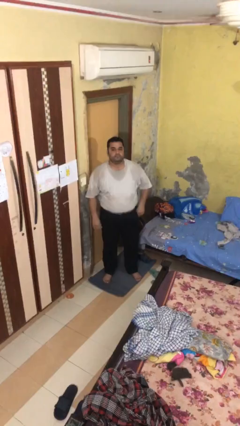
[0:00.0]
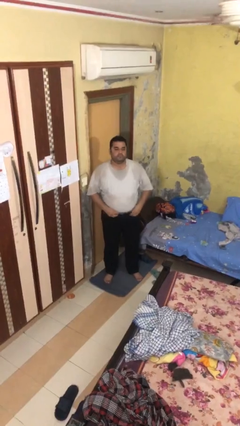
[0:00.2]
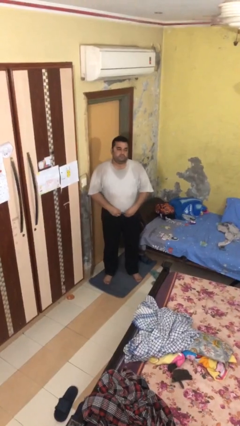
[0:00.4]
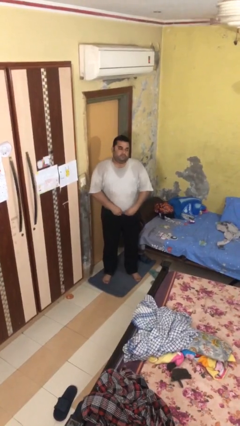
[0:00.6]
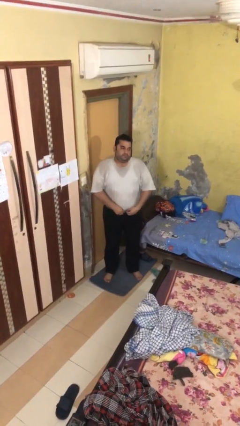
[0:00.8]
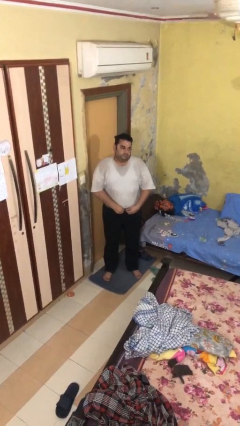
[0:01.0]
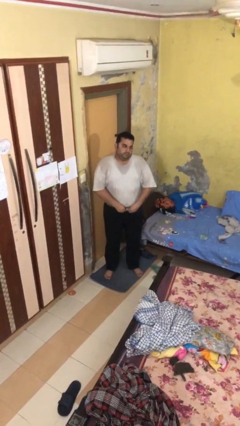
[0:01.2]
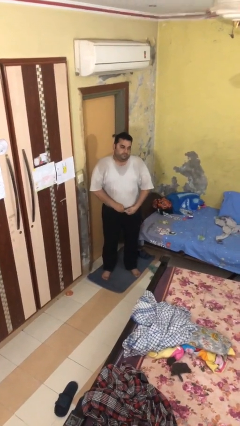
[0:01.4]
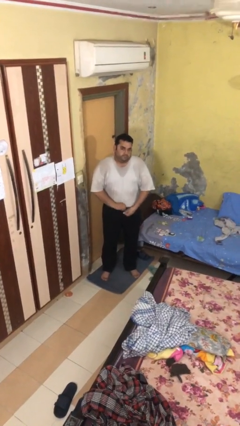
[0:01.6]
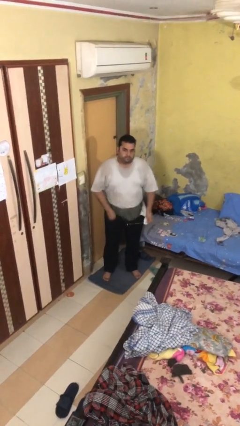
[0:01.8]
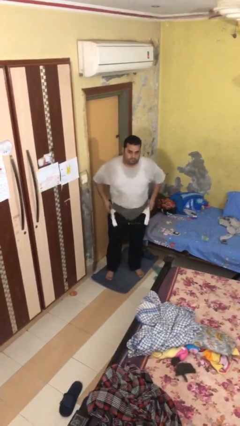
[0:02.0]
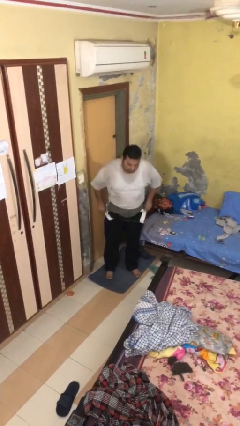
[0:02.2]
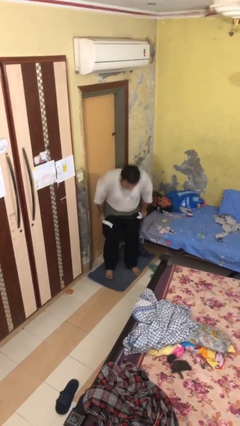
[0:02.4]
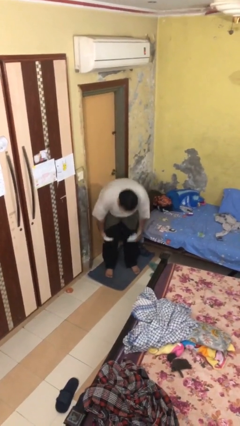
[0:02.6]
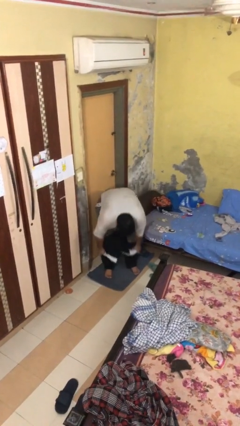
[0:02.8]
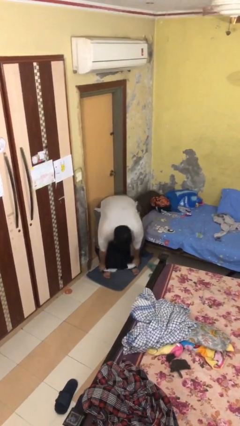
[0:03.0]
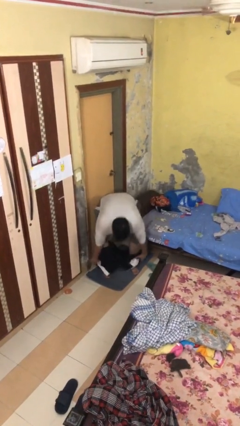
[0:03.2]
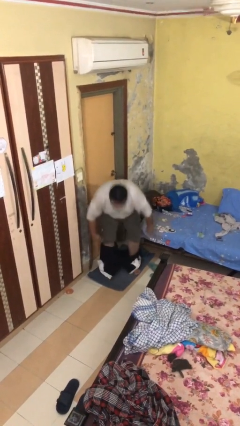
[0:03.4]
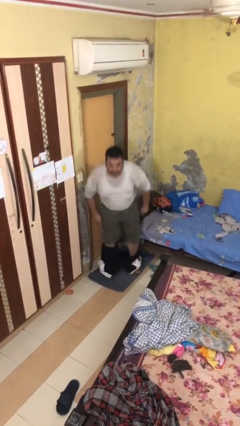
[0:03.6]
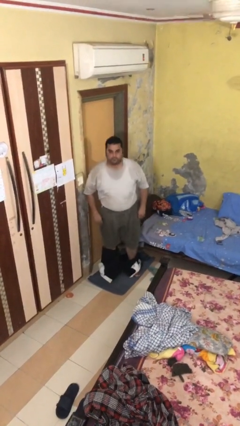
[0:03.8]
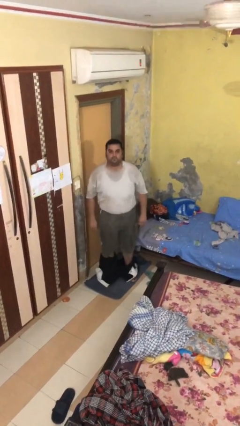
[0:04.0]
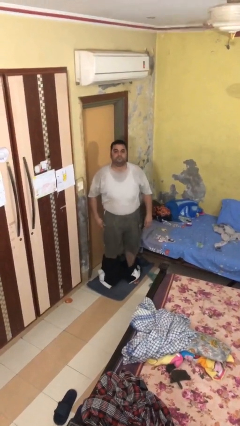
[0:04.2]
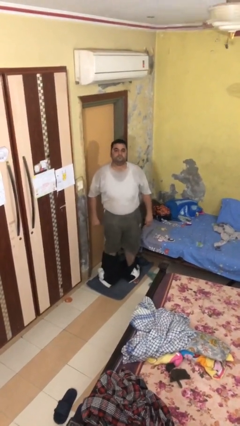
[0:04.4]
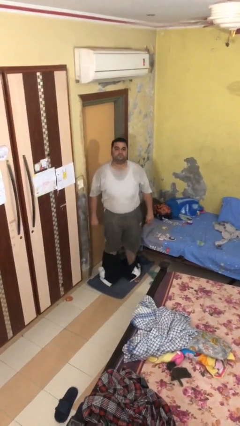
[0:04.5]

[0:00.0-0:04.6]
person takes off pants

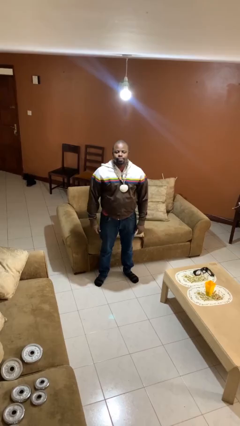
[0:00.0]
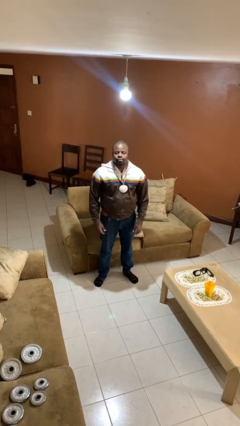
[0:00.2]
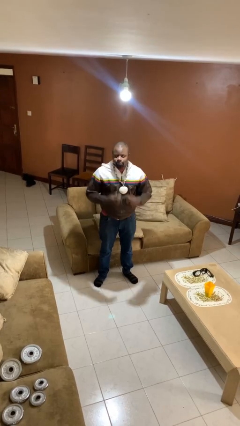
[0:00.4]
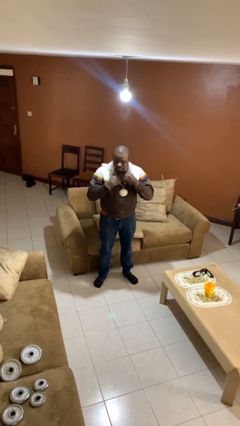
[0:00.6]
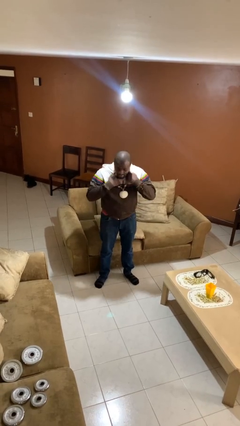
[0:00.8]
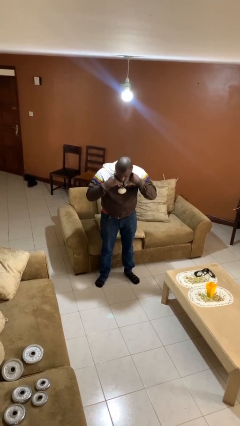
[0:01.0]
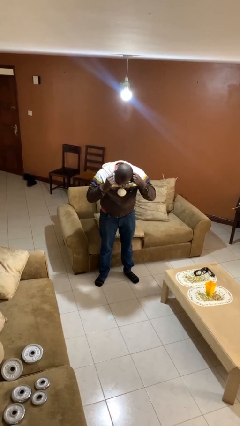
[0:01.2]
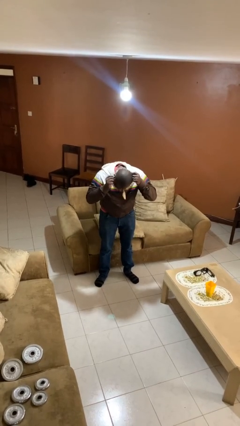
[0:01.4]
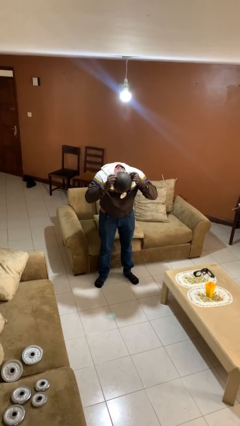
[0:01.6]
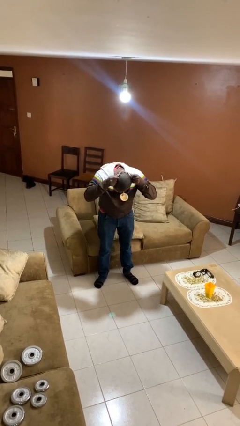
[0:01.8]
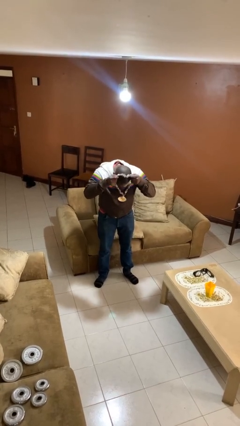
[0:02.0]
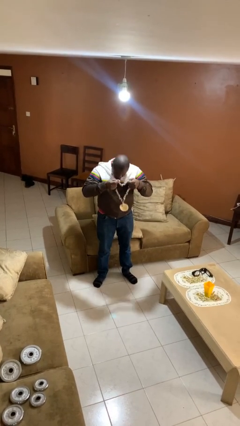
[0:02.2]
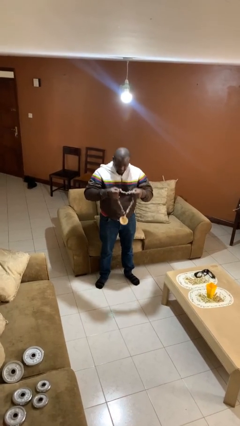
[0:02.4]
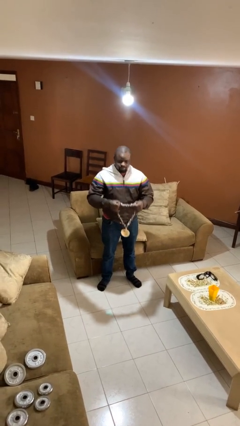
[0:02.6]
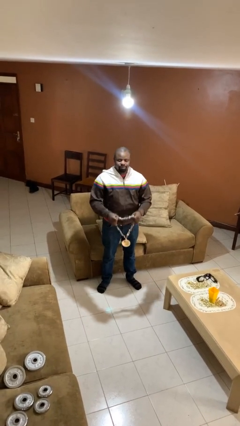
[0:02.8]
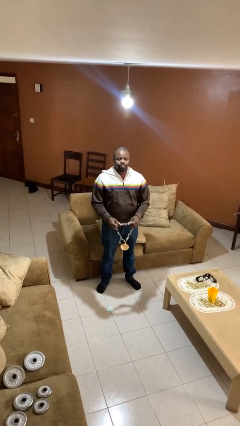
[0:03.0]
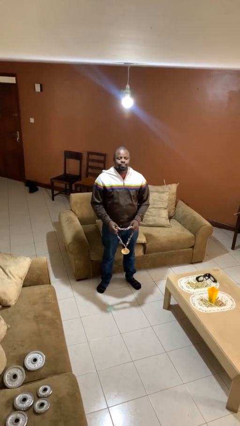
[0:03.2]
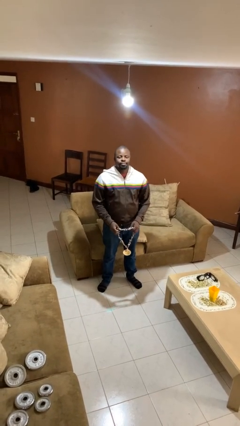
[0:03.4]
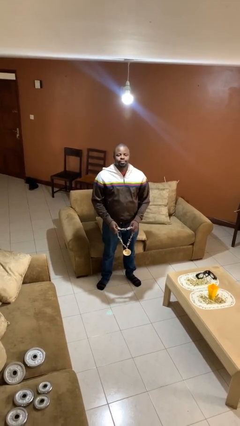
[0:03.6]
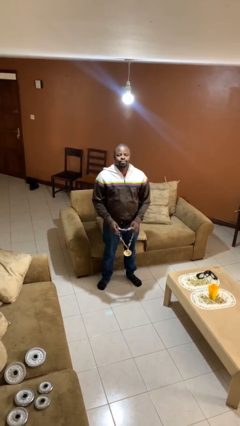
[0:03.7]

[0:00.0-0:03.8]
person takes off necklace

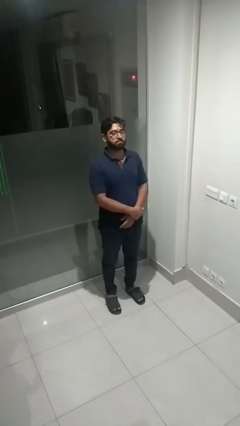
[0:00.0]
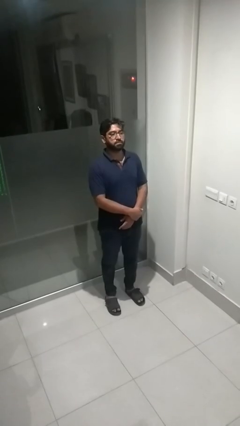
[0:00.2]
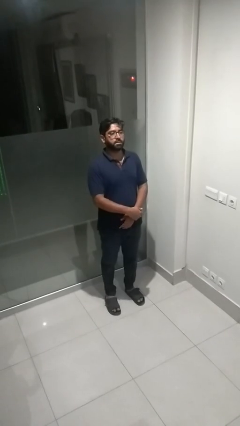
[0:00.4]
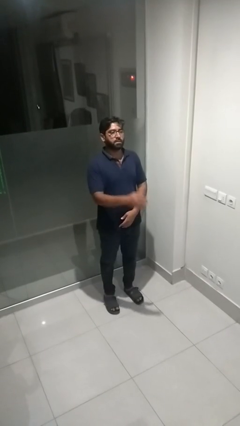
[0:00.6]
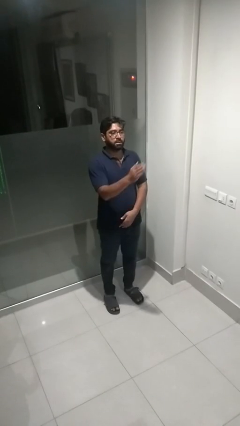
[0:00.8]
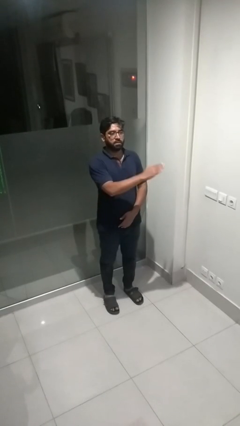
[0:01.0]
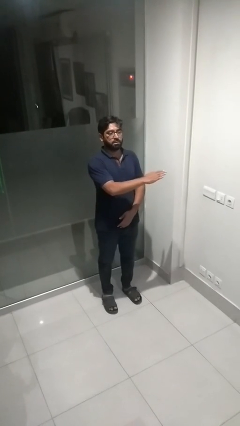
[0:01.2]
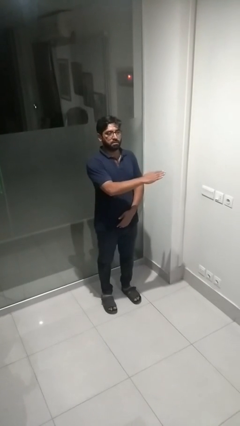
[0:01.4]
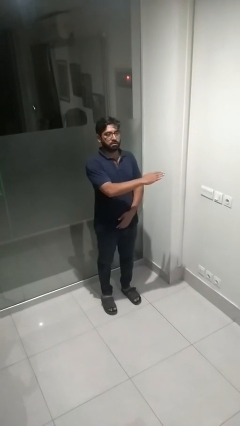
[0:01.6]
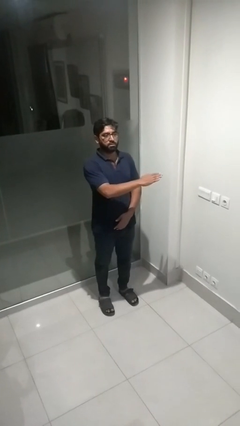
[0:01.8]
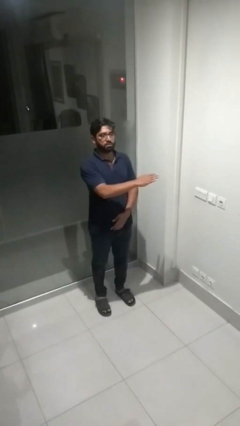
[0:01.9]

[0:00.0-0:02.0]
person gestures swipe left

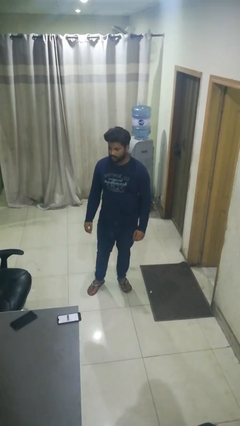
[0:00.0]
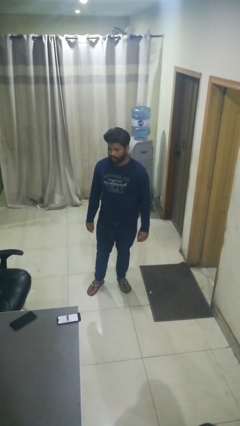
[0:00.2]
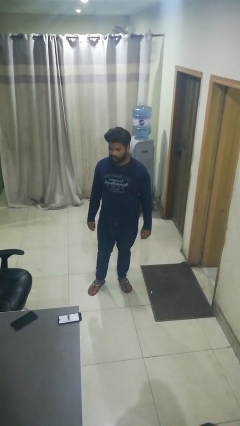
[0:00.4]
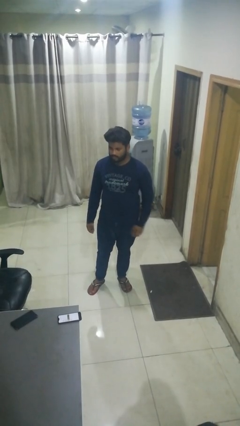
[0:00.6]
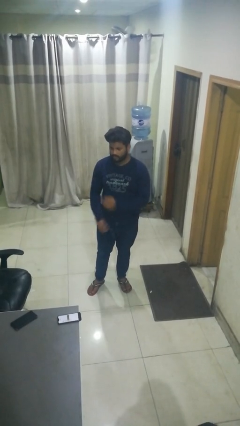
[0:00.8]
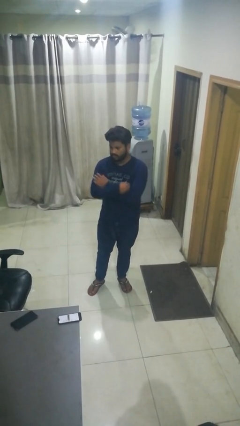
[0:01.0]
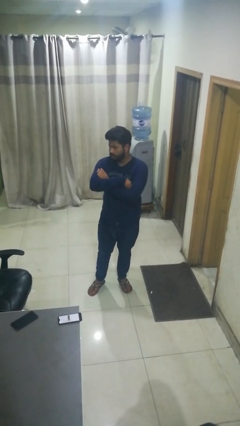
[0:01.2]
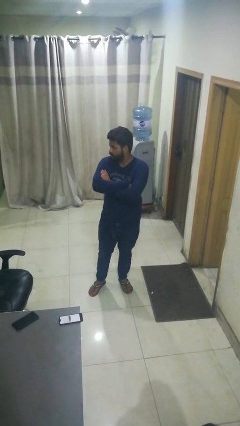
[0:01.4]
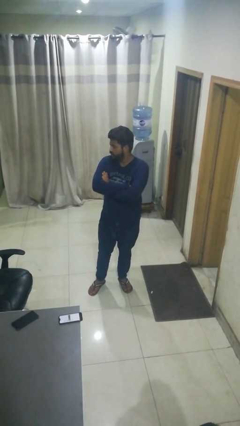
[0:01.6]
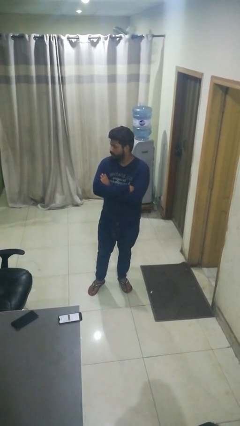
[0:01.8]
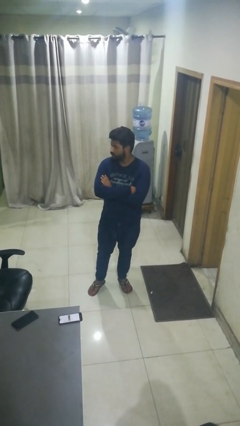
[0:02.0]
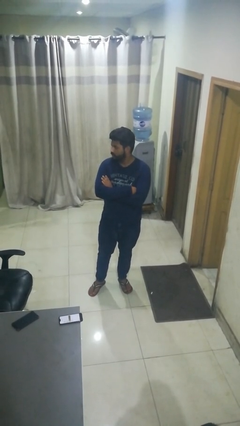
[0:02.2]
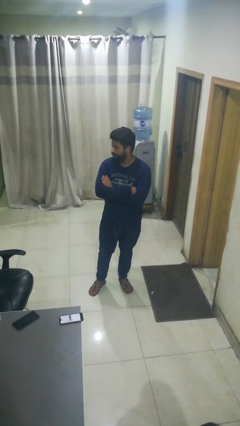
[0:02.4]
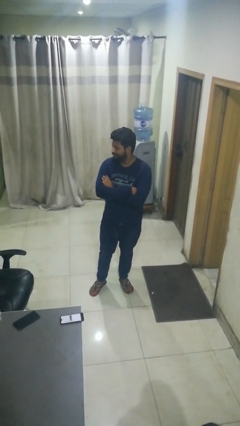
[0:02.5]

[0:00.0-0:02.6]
person crosses arms

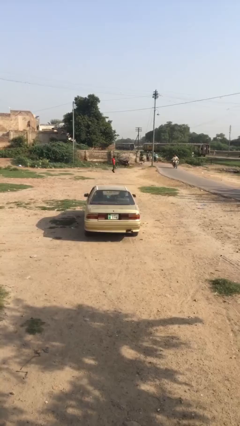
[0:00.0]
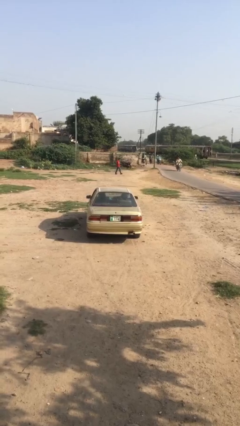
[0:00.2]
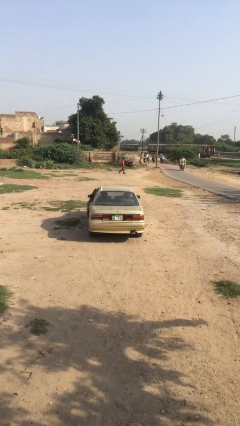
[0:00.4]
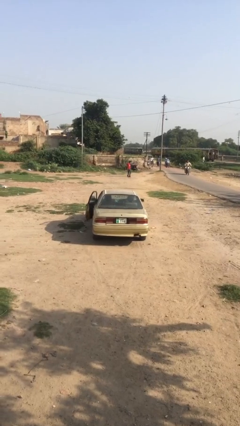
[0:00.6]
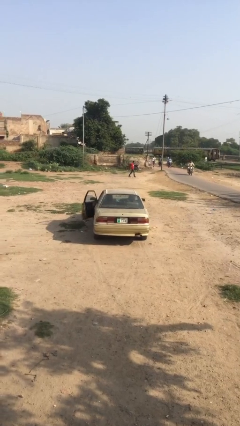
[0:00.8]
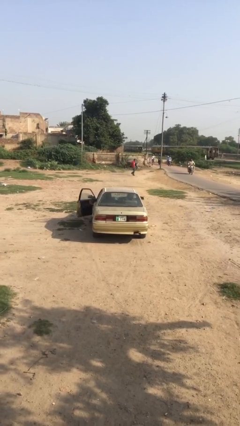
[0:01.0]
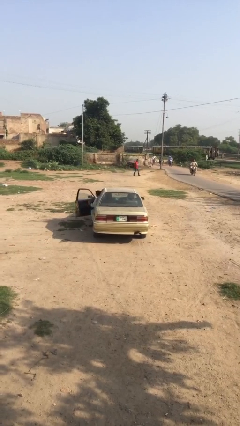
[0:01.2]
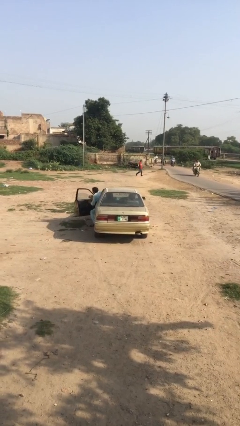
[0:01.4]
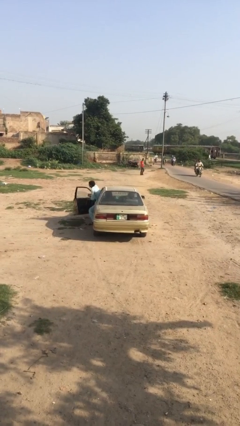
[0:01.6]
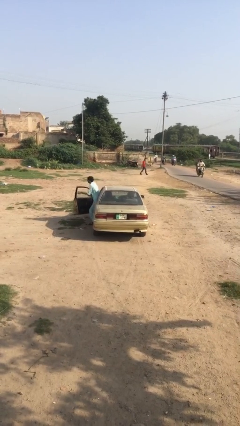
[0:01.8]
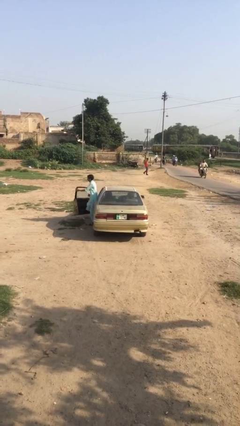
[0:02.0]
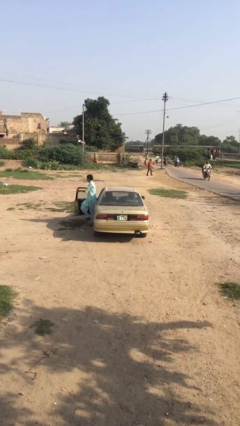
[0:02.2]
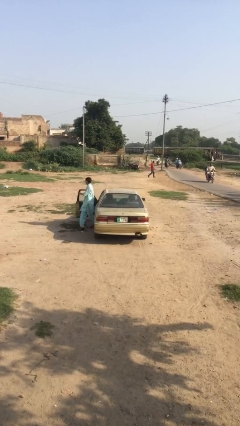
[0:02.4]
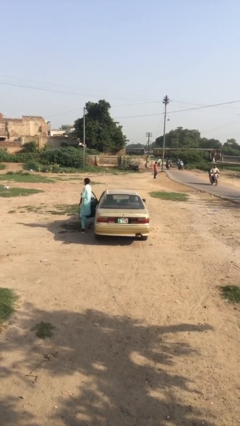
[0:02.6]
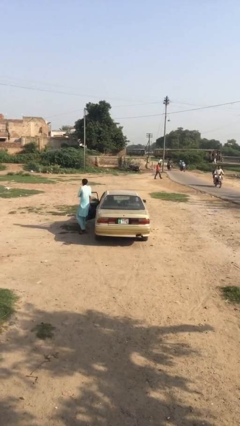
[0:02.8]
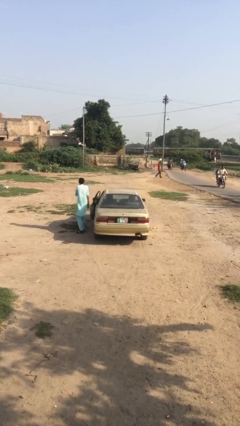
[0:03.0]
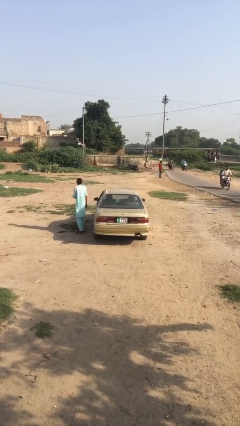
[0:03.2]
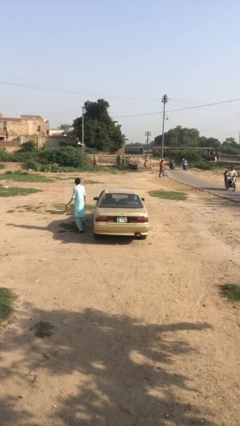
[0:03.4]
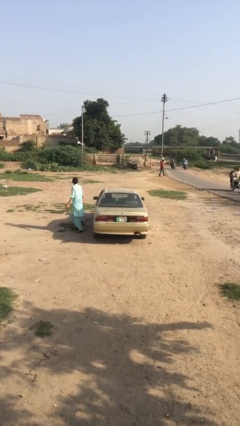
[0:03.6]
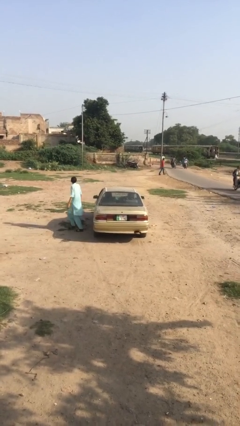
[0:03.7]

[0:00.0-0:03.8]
car drops off person

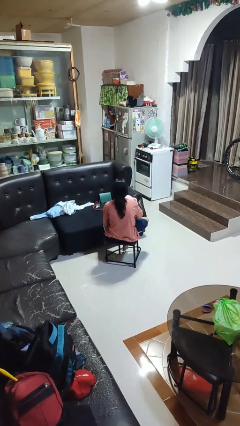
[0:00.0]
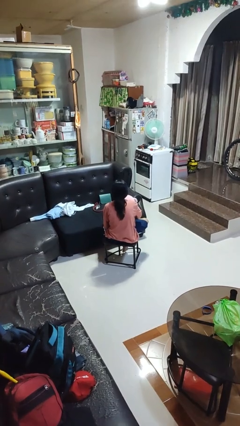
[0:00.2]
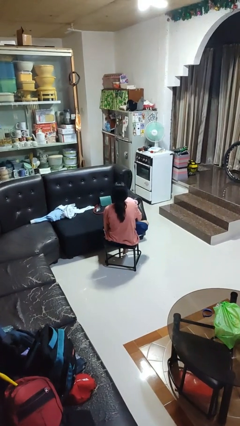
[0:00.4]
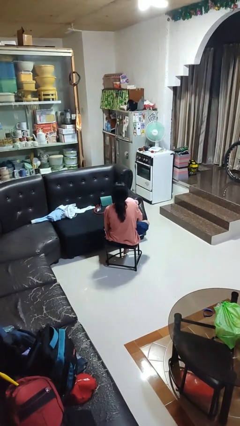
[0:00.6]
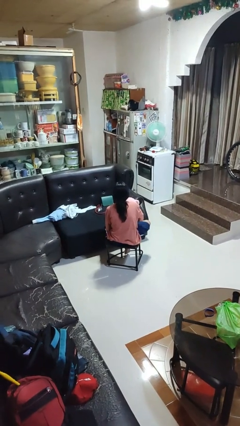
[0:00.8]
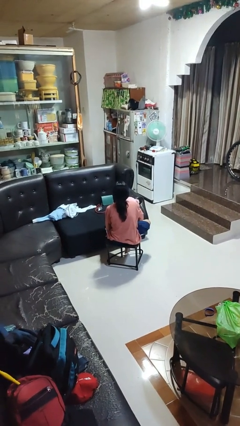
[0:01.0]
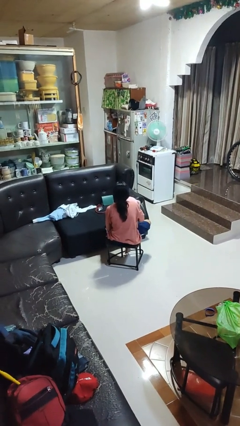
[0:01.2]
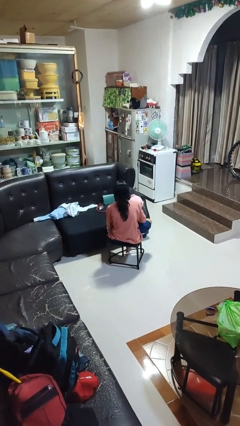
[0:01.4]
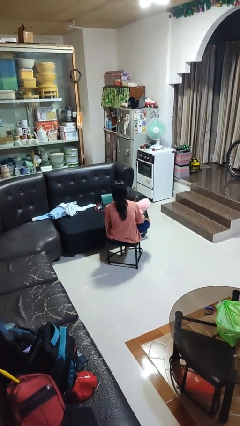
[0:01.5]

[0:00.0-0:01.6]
person hugs stuffed animal
